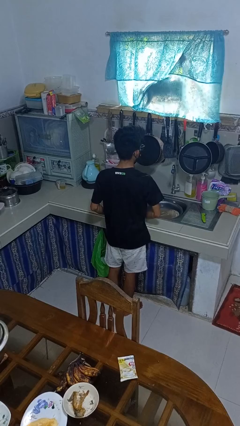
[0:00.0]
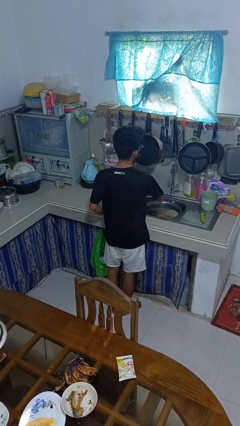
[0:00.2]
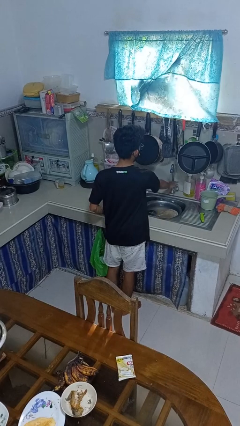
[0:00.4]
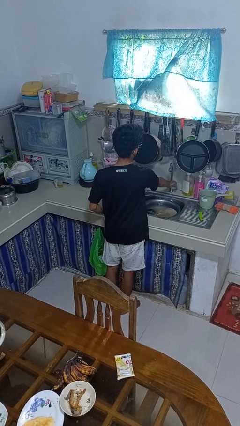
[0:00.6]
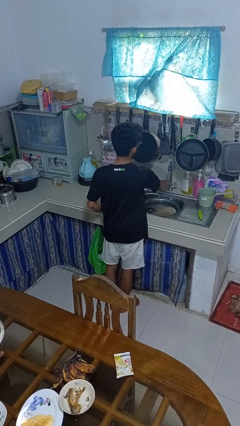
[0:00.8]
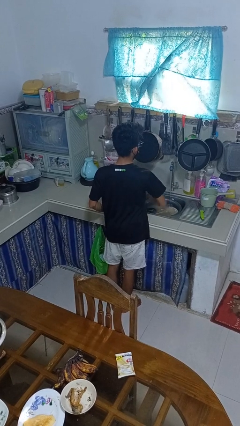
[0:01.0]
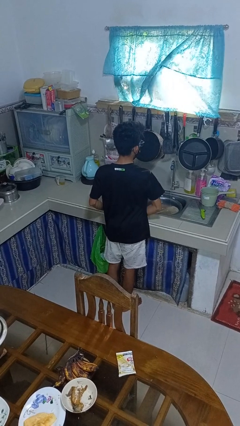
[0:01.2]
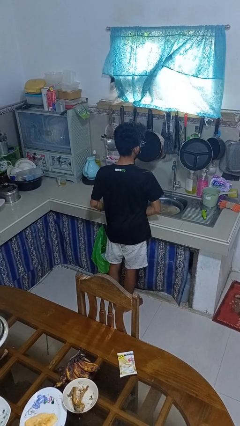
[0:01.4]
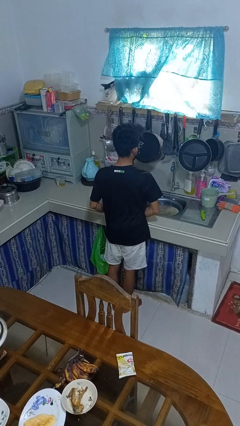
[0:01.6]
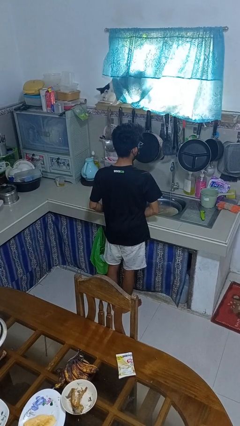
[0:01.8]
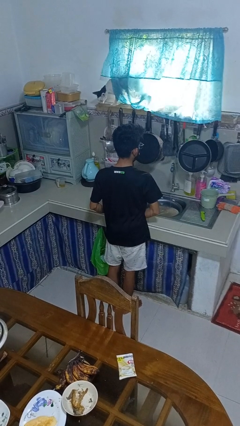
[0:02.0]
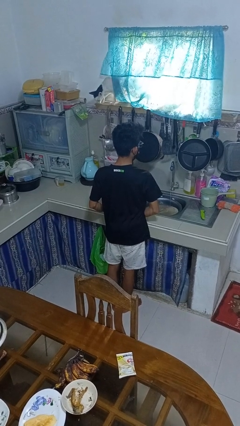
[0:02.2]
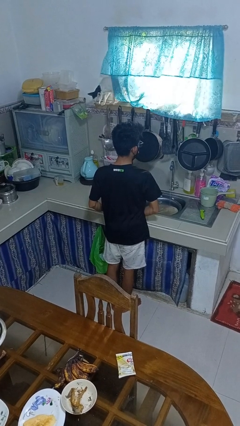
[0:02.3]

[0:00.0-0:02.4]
person turns on faucet

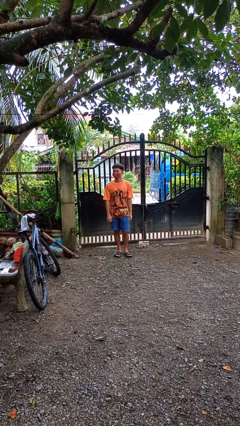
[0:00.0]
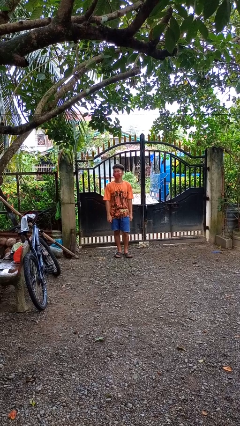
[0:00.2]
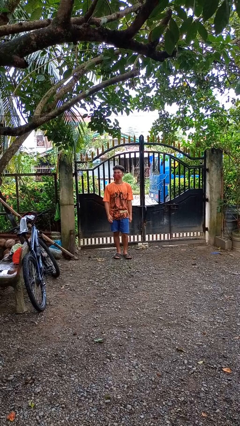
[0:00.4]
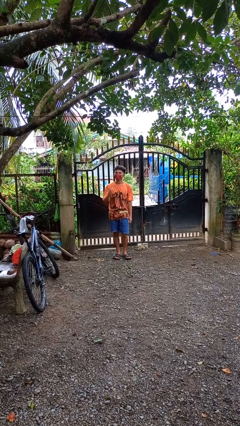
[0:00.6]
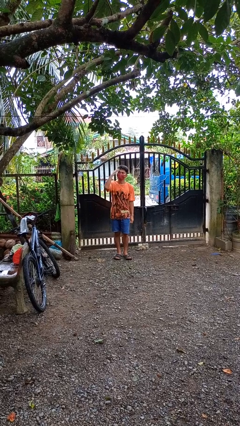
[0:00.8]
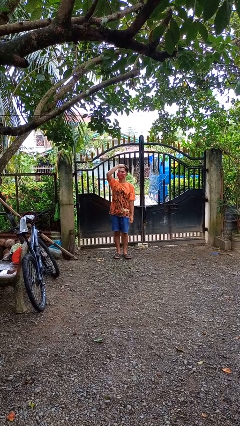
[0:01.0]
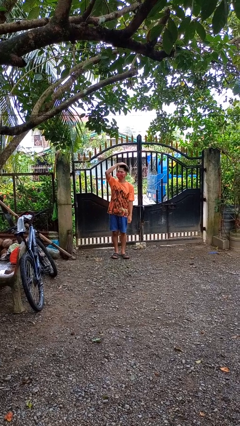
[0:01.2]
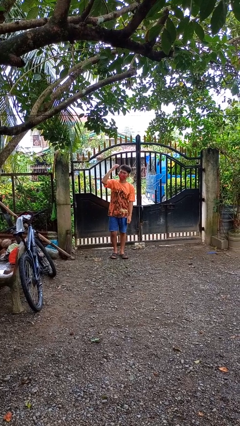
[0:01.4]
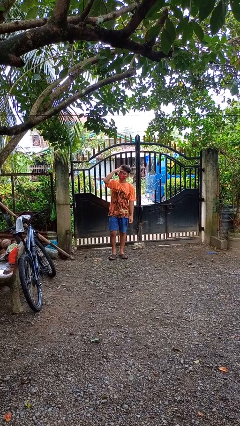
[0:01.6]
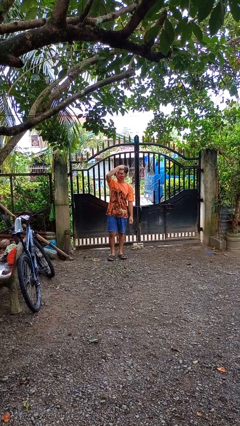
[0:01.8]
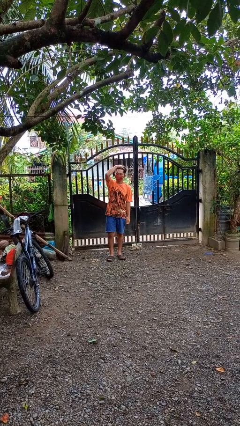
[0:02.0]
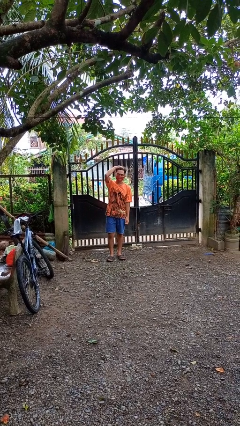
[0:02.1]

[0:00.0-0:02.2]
person strokes hair

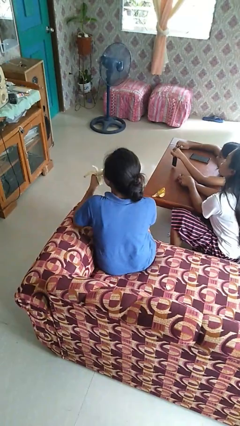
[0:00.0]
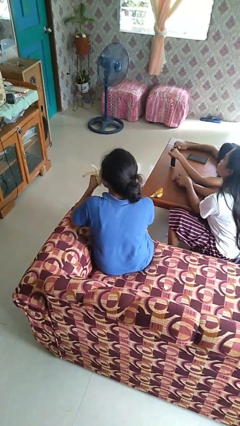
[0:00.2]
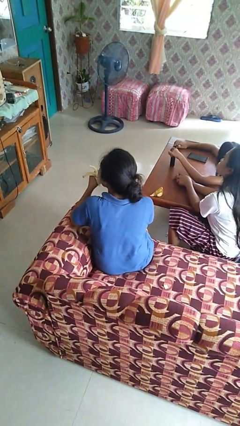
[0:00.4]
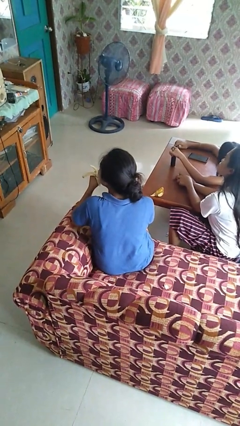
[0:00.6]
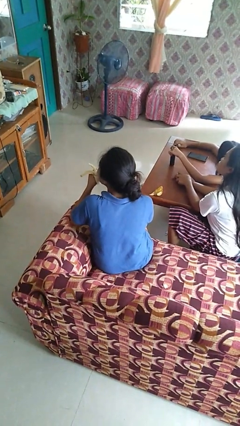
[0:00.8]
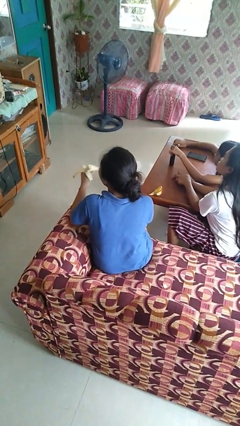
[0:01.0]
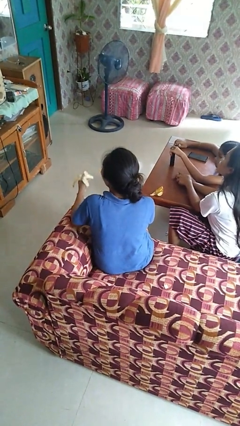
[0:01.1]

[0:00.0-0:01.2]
person eats banana

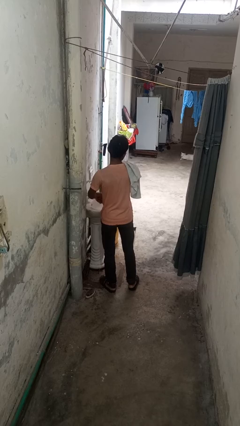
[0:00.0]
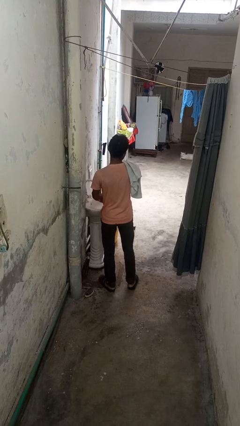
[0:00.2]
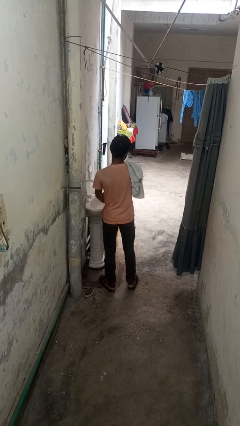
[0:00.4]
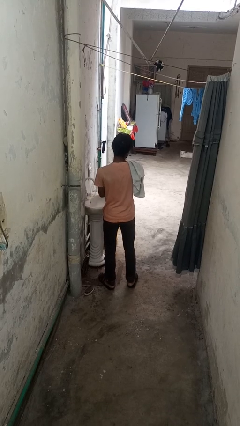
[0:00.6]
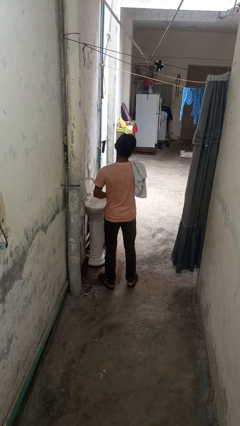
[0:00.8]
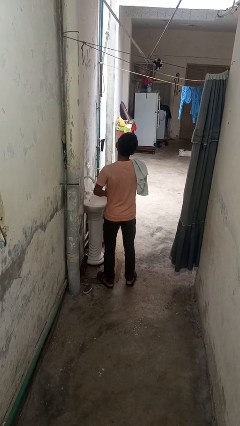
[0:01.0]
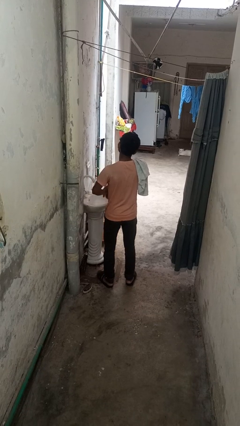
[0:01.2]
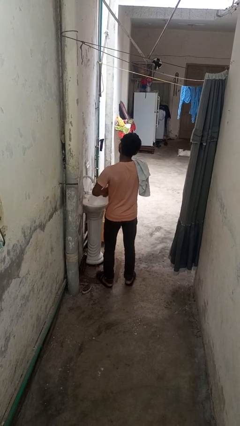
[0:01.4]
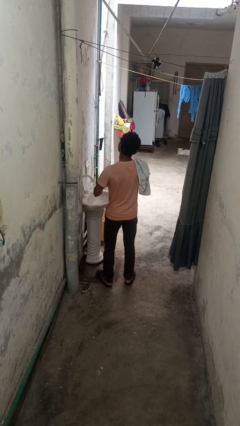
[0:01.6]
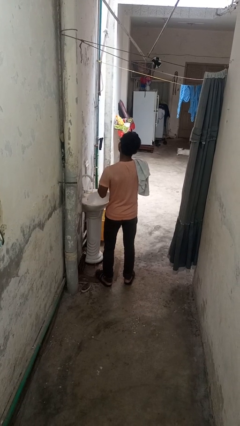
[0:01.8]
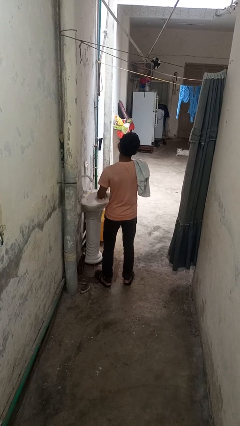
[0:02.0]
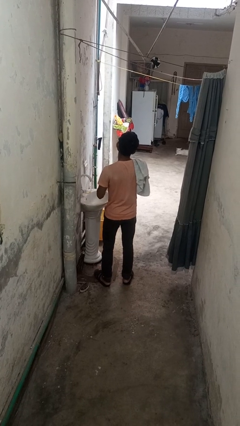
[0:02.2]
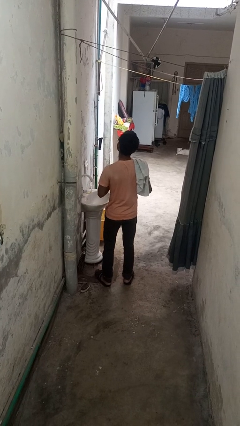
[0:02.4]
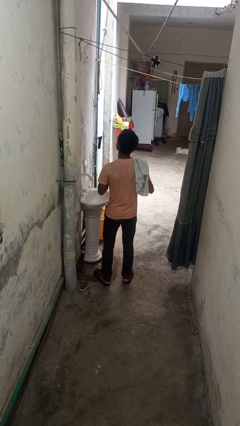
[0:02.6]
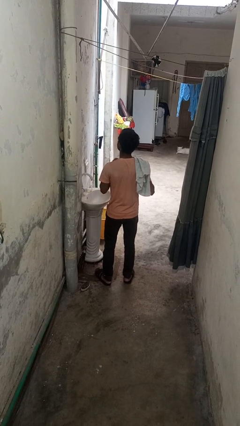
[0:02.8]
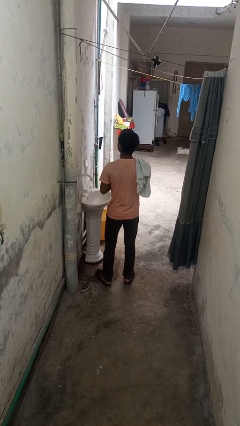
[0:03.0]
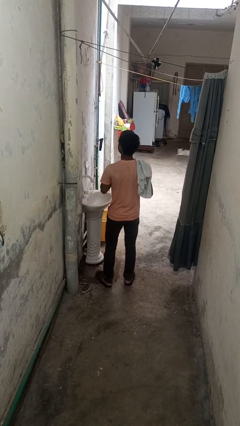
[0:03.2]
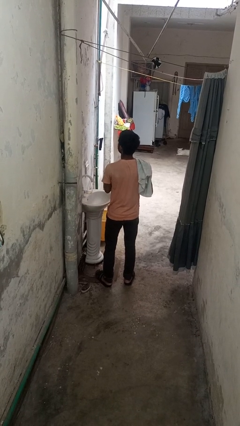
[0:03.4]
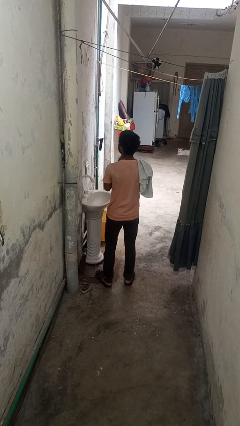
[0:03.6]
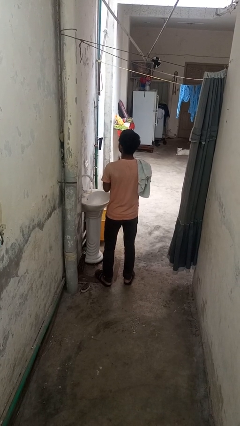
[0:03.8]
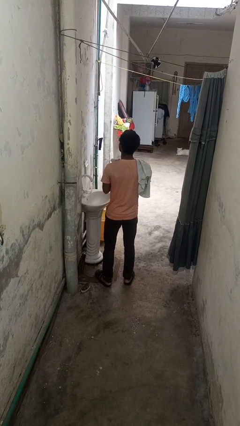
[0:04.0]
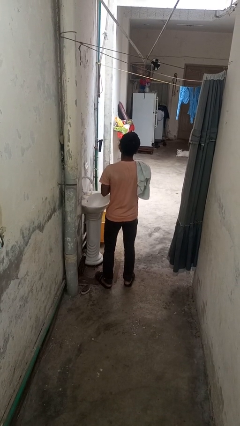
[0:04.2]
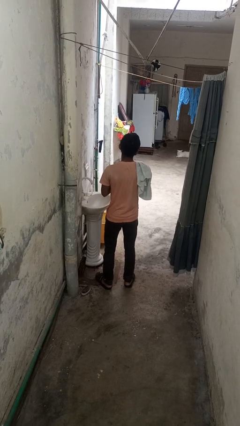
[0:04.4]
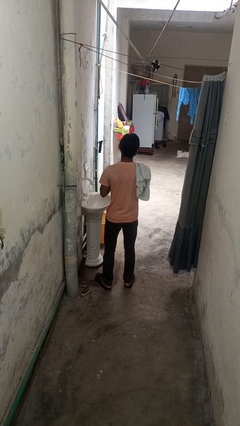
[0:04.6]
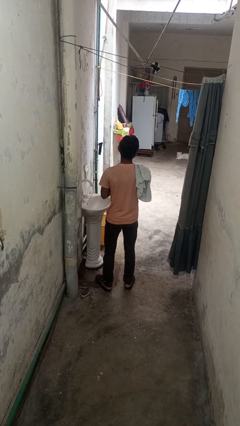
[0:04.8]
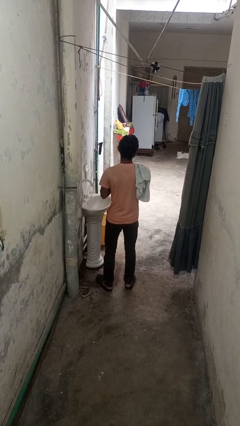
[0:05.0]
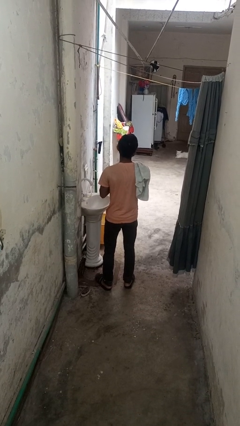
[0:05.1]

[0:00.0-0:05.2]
person dries hands with towel

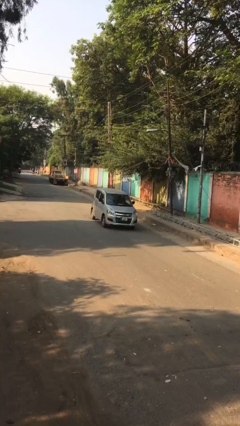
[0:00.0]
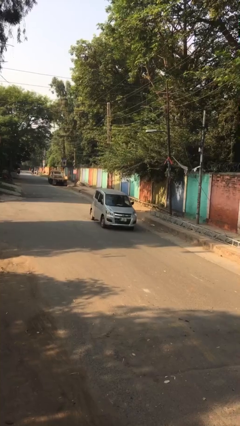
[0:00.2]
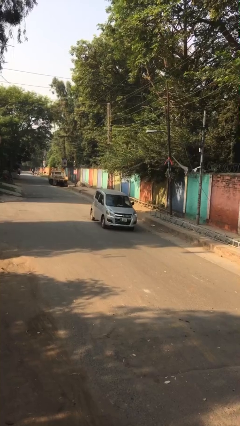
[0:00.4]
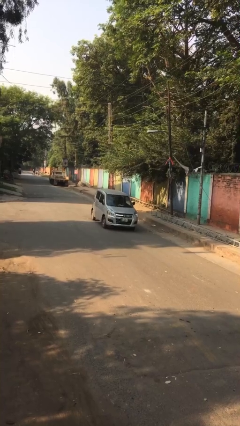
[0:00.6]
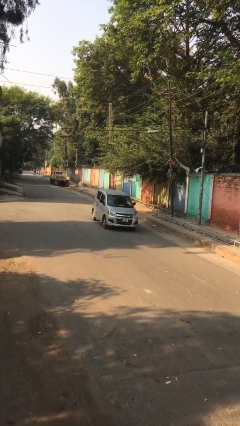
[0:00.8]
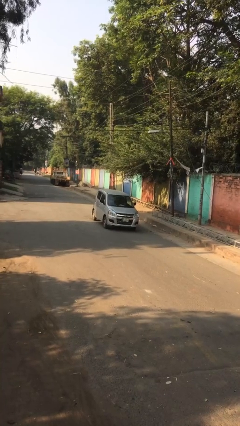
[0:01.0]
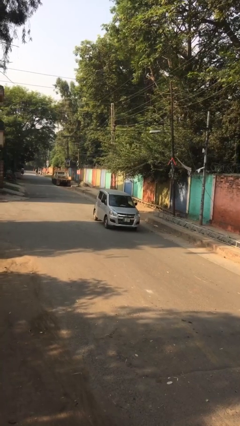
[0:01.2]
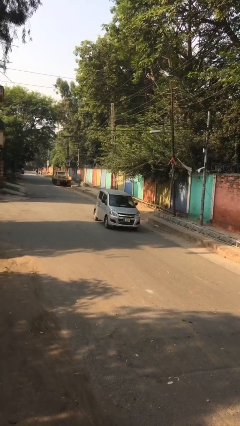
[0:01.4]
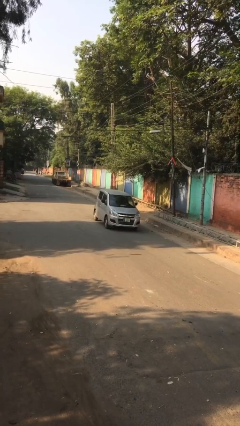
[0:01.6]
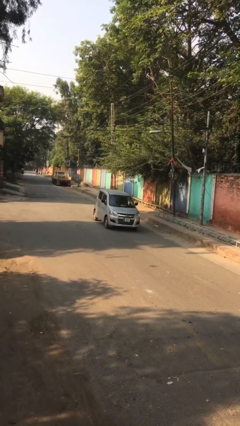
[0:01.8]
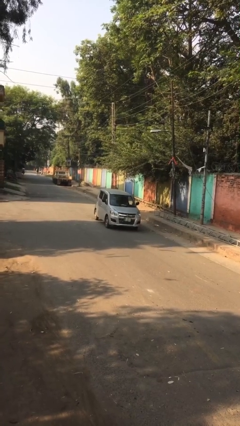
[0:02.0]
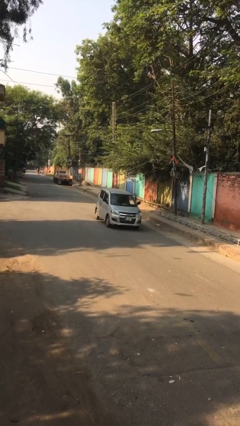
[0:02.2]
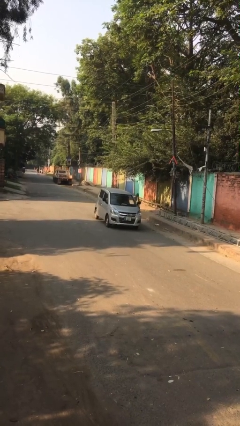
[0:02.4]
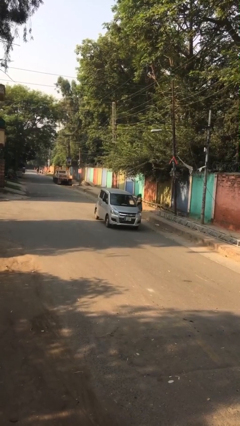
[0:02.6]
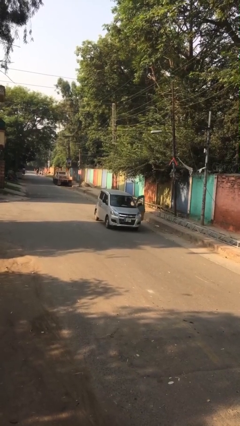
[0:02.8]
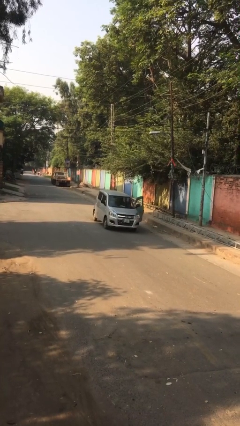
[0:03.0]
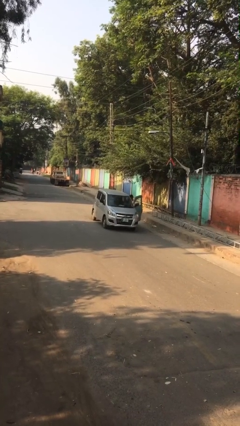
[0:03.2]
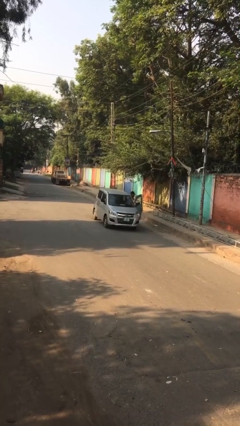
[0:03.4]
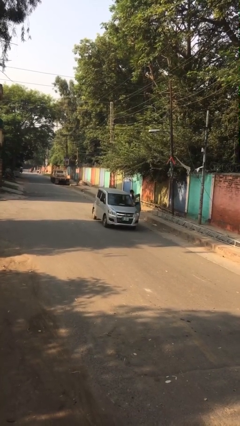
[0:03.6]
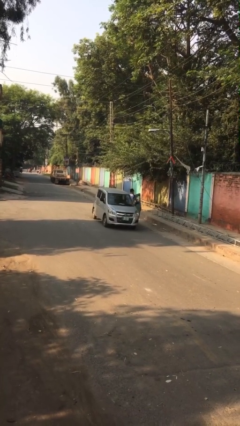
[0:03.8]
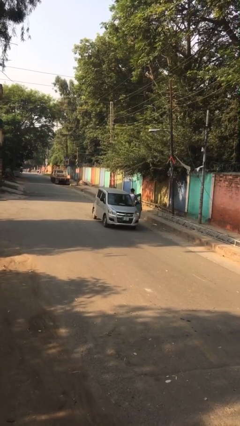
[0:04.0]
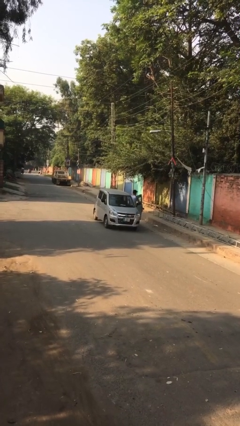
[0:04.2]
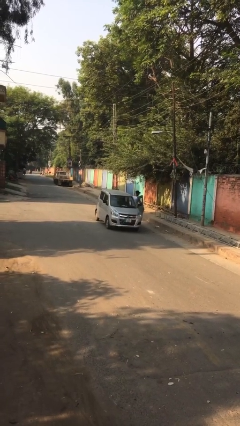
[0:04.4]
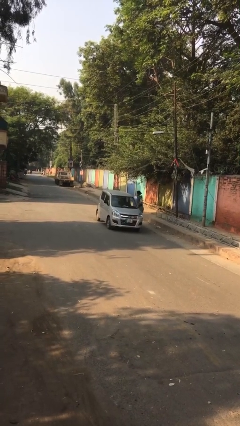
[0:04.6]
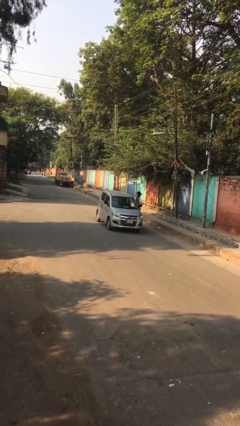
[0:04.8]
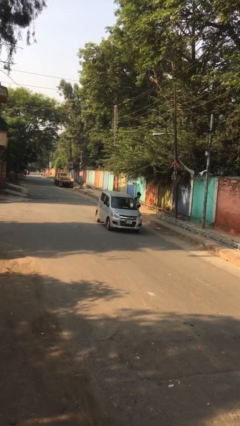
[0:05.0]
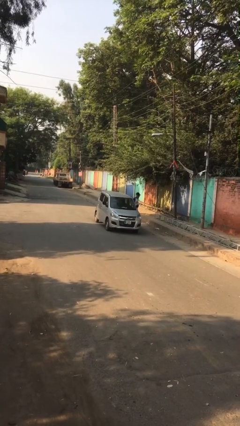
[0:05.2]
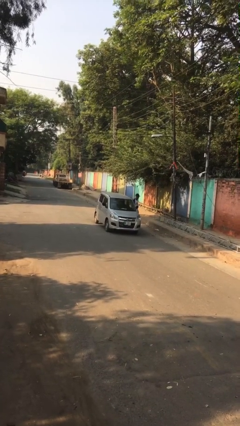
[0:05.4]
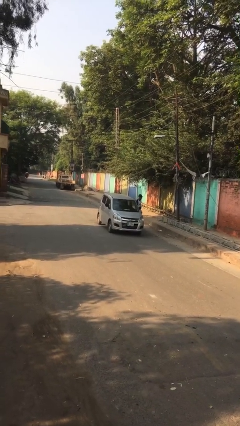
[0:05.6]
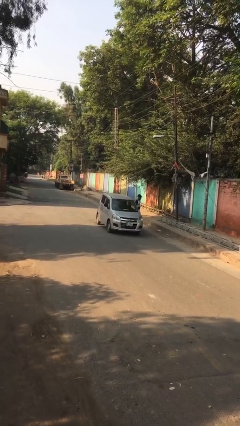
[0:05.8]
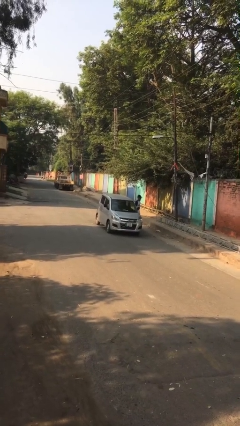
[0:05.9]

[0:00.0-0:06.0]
car drops off person

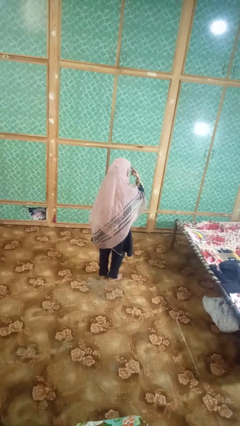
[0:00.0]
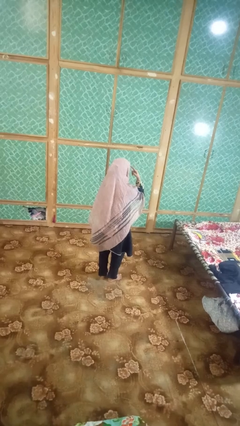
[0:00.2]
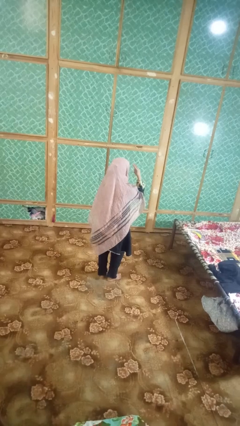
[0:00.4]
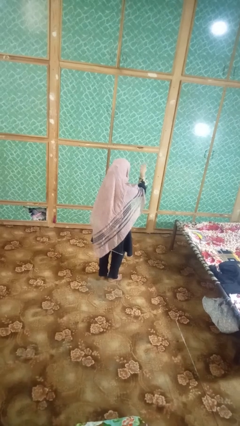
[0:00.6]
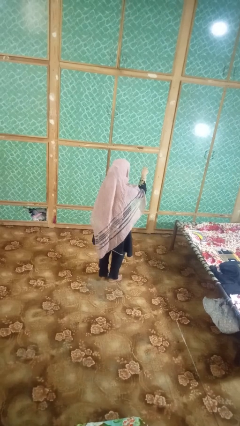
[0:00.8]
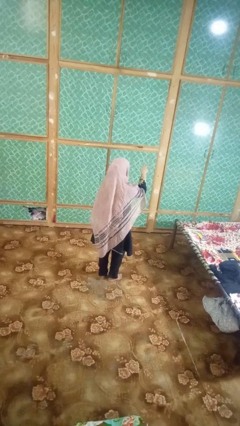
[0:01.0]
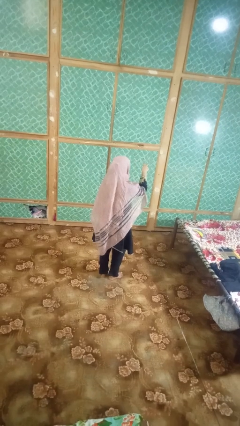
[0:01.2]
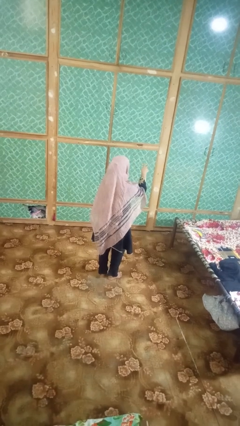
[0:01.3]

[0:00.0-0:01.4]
person gestures behind me
